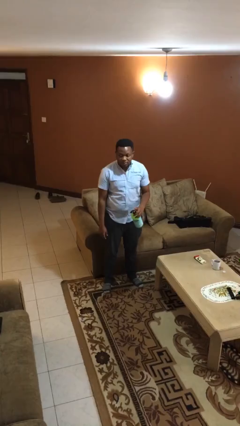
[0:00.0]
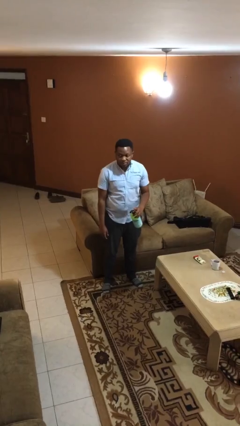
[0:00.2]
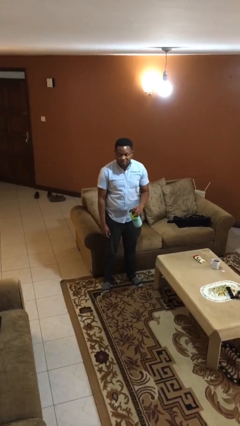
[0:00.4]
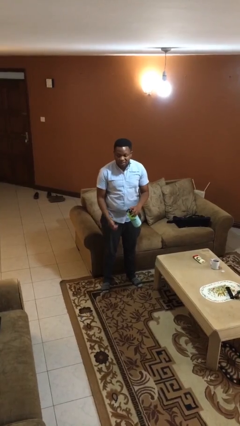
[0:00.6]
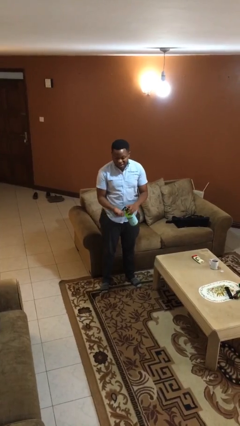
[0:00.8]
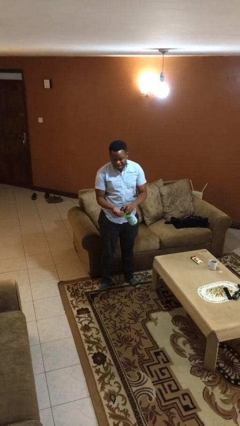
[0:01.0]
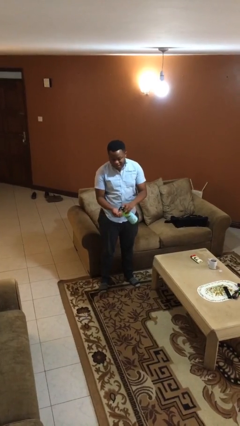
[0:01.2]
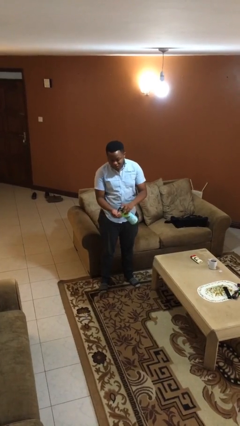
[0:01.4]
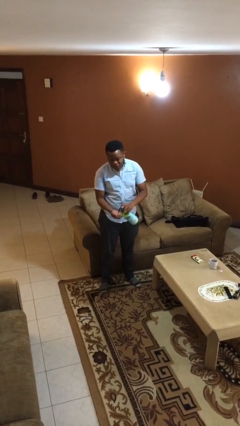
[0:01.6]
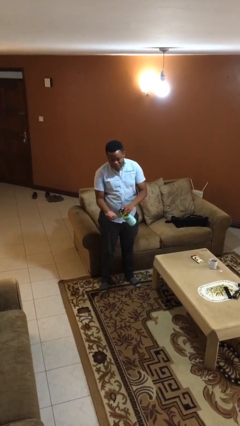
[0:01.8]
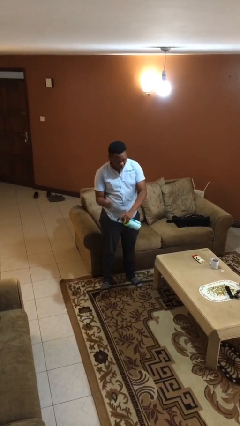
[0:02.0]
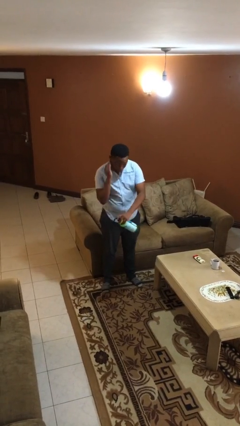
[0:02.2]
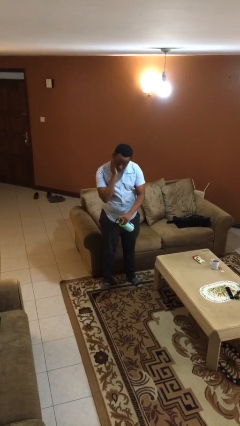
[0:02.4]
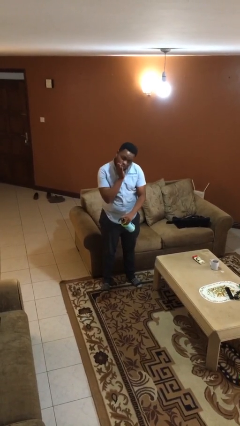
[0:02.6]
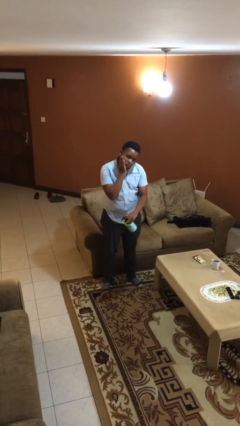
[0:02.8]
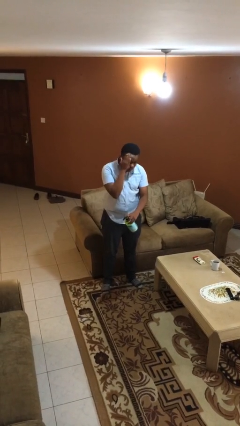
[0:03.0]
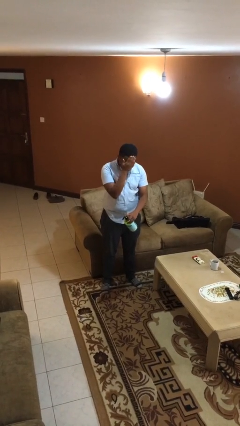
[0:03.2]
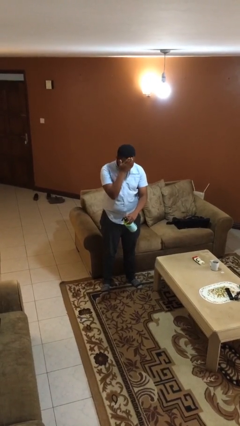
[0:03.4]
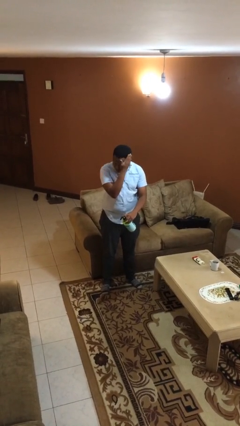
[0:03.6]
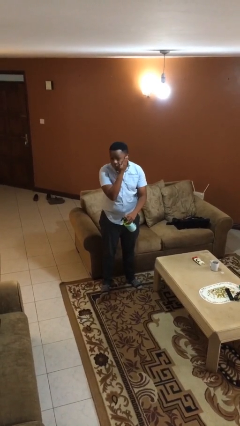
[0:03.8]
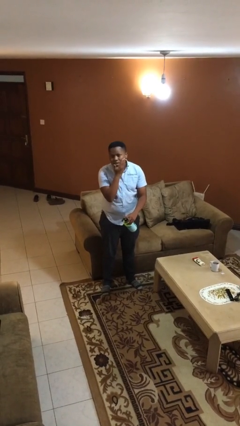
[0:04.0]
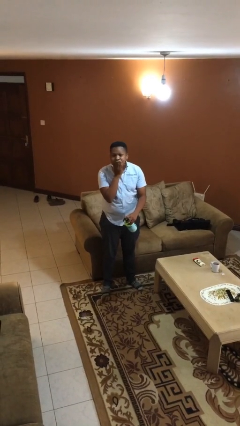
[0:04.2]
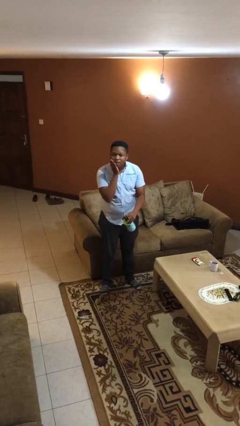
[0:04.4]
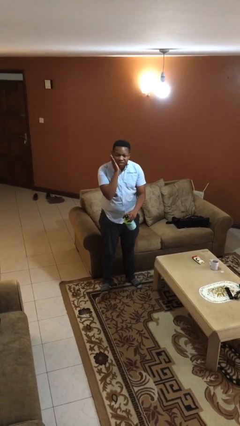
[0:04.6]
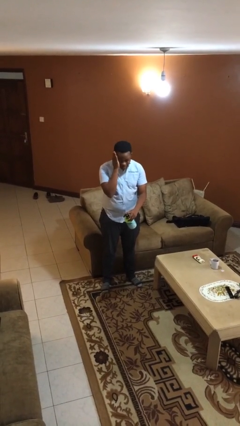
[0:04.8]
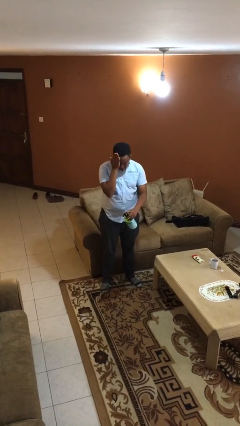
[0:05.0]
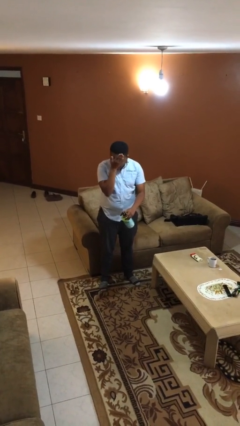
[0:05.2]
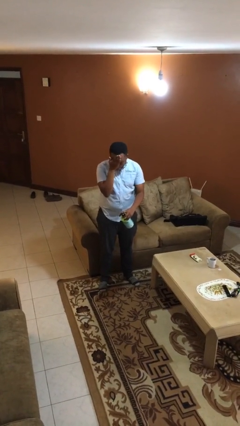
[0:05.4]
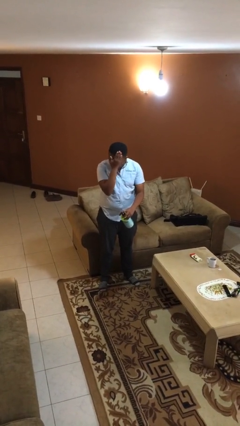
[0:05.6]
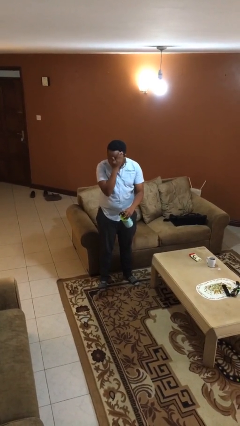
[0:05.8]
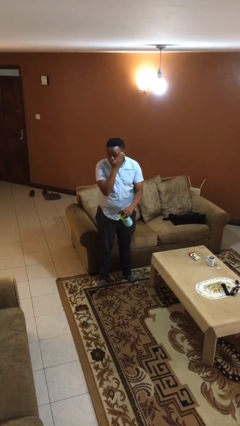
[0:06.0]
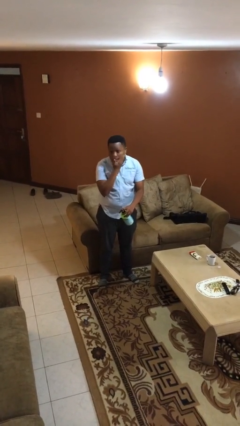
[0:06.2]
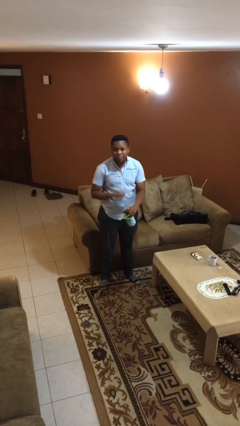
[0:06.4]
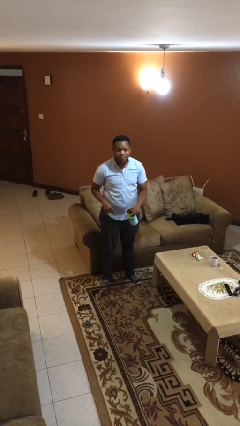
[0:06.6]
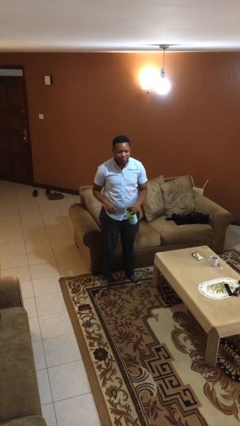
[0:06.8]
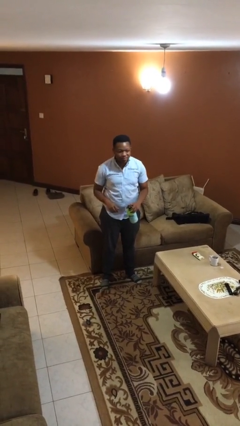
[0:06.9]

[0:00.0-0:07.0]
person applies sunscreen

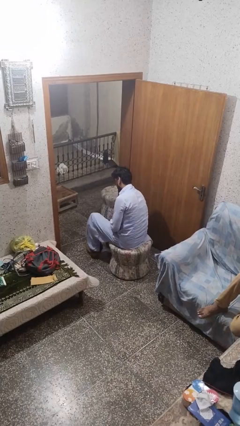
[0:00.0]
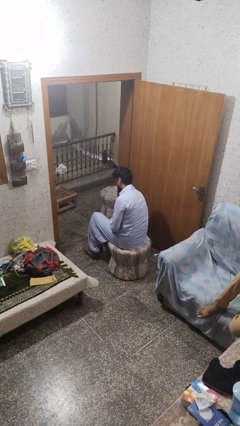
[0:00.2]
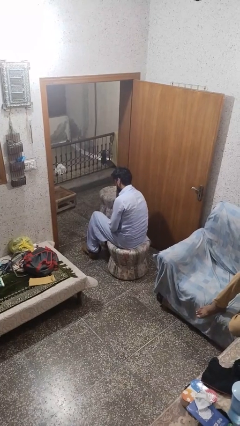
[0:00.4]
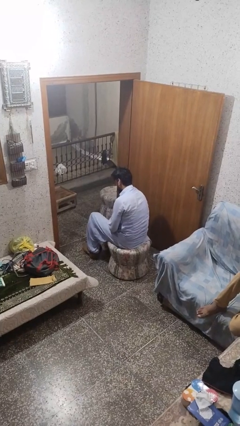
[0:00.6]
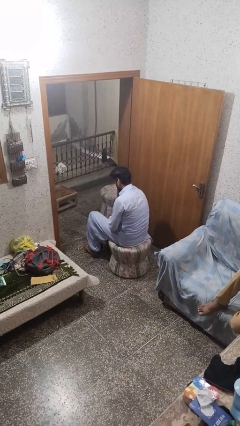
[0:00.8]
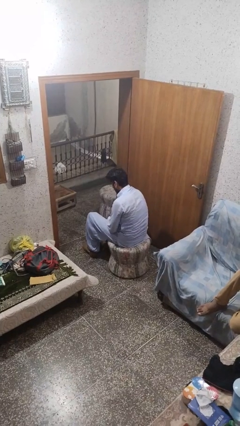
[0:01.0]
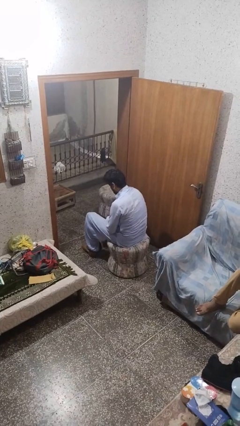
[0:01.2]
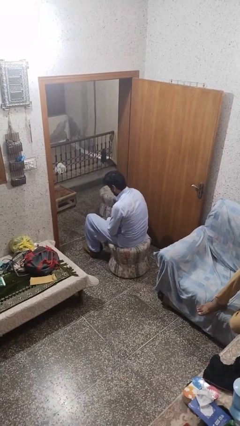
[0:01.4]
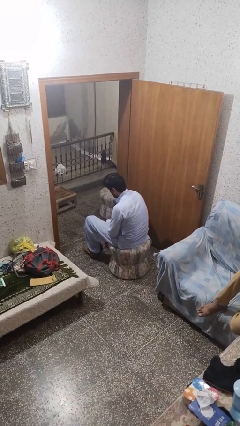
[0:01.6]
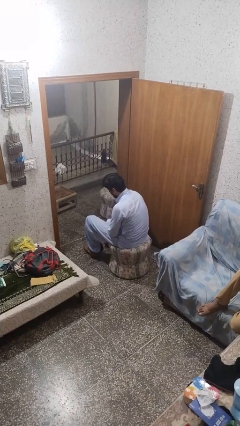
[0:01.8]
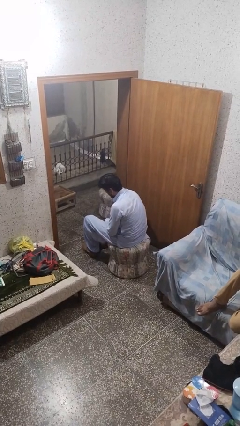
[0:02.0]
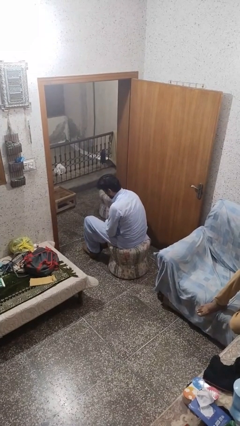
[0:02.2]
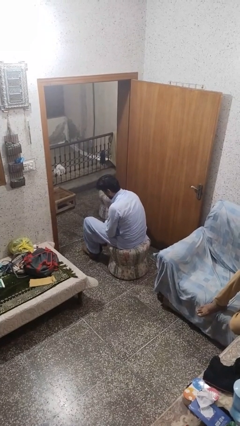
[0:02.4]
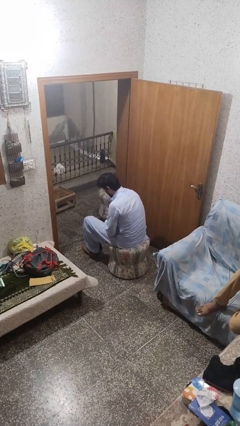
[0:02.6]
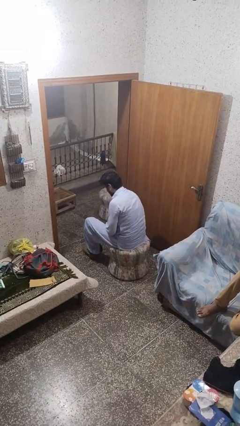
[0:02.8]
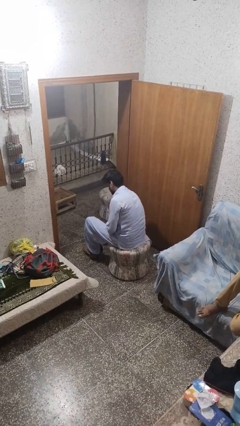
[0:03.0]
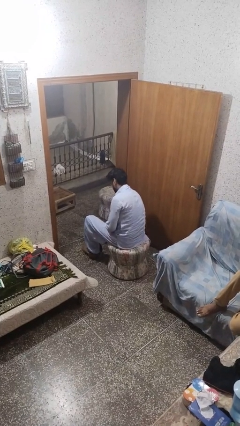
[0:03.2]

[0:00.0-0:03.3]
person takes off shoes

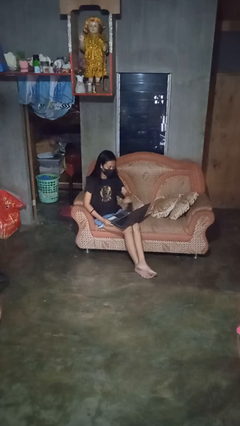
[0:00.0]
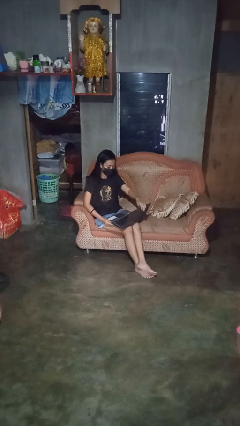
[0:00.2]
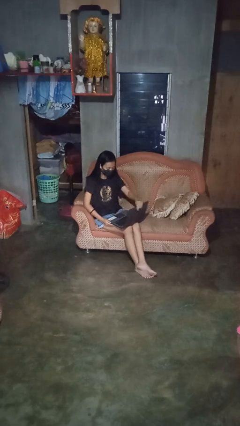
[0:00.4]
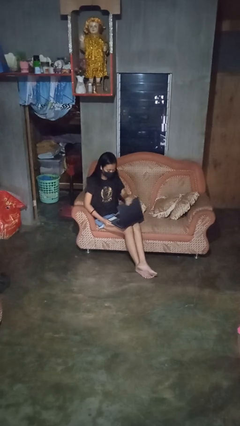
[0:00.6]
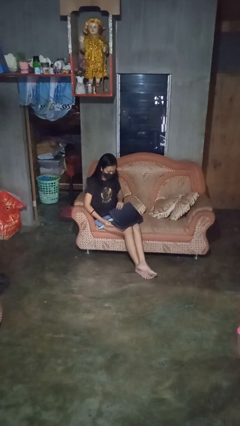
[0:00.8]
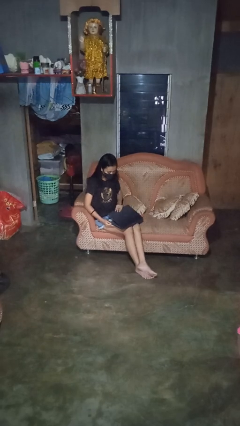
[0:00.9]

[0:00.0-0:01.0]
person closes laptop

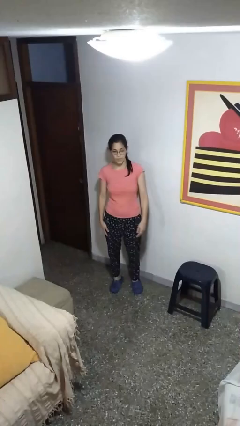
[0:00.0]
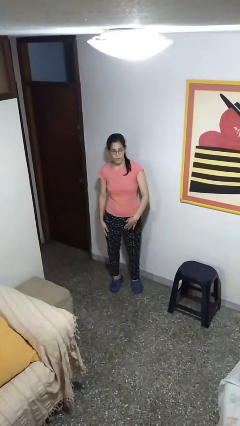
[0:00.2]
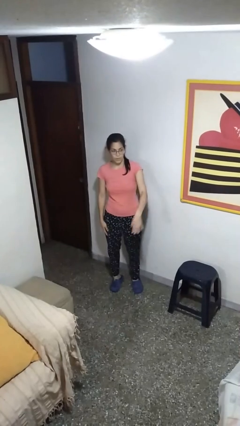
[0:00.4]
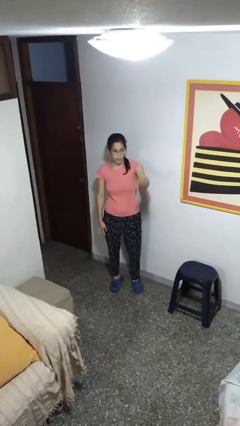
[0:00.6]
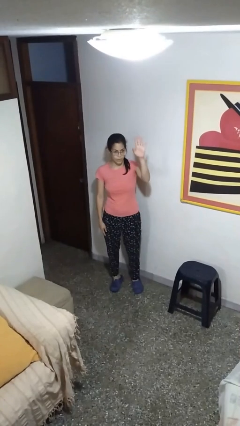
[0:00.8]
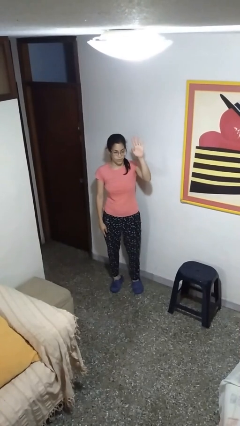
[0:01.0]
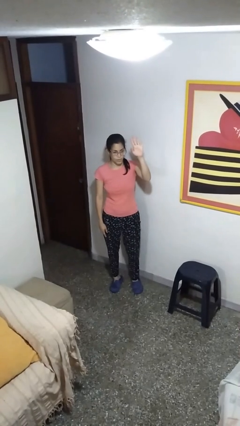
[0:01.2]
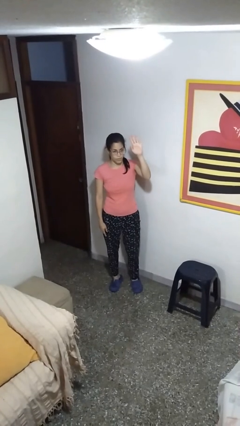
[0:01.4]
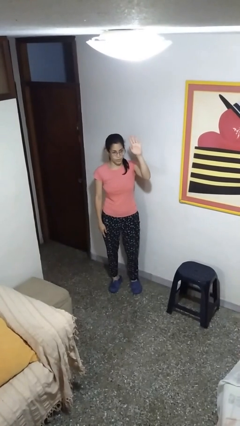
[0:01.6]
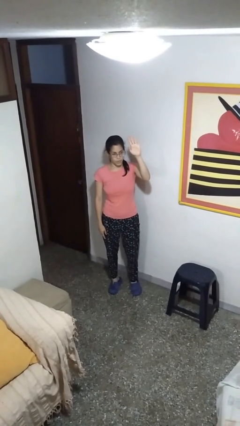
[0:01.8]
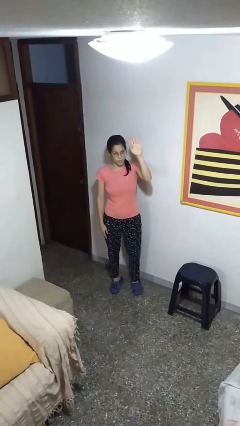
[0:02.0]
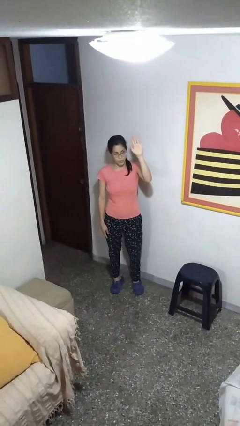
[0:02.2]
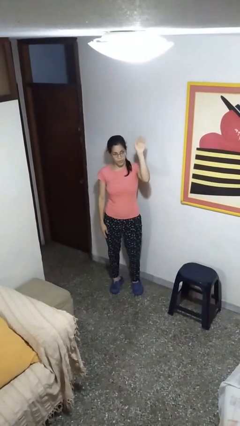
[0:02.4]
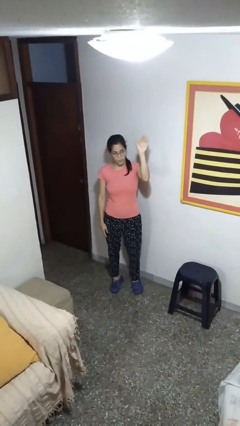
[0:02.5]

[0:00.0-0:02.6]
person gestures swipe up

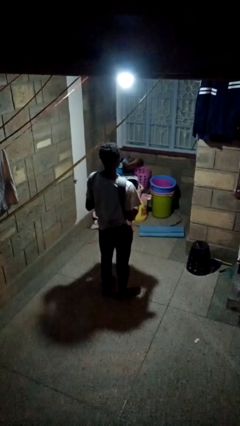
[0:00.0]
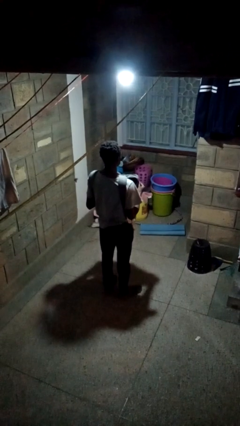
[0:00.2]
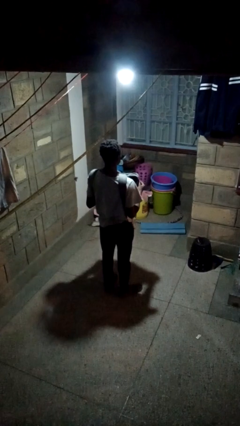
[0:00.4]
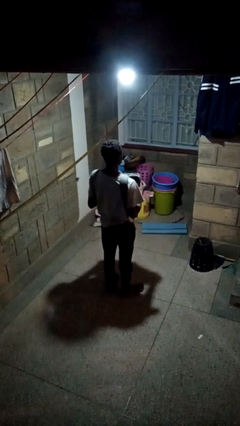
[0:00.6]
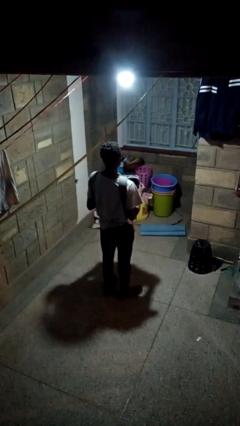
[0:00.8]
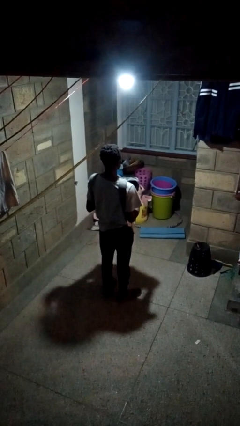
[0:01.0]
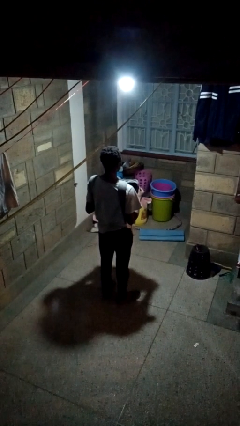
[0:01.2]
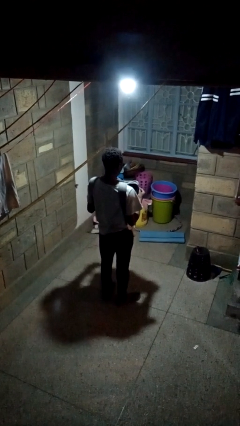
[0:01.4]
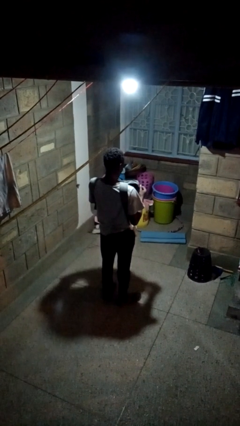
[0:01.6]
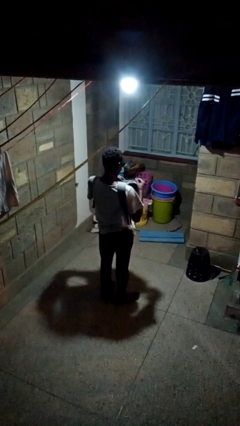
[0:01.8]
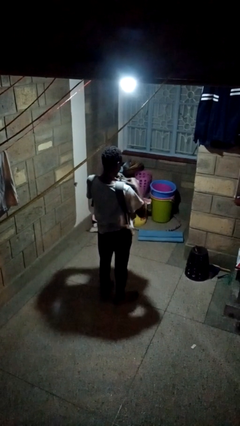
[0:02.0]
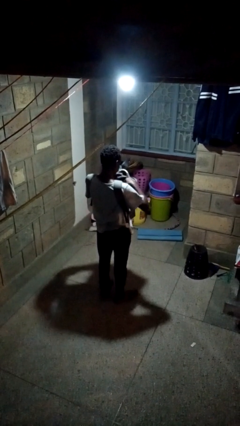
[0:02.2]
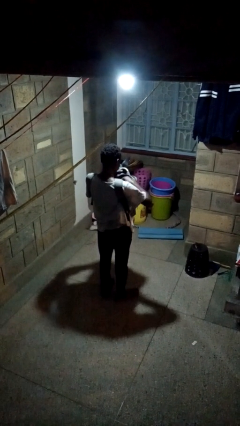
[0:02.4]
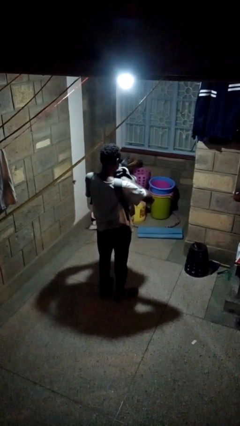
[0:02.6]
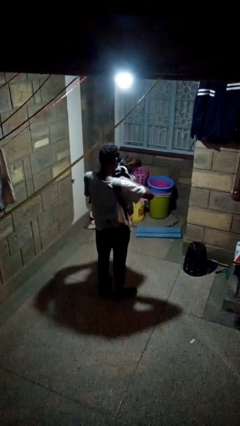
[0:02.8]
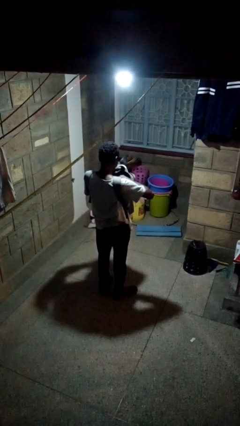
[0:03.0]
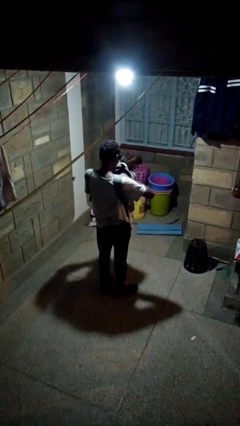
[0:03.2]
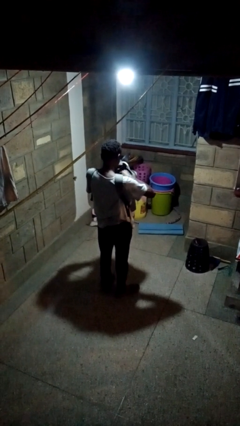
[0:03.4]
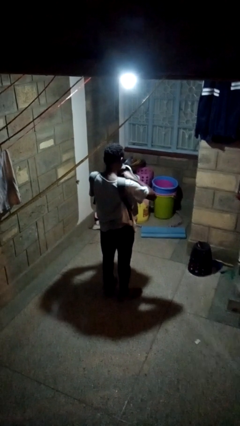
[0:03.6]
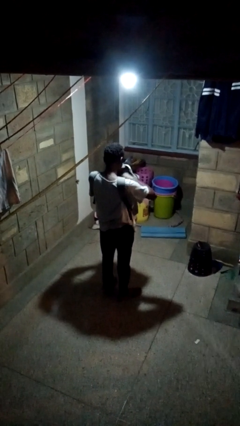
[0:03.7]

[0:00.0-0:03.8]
person puts object into backpack
